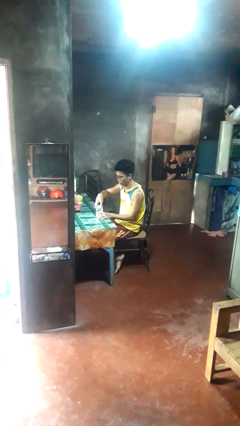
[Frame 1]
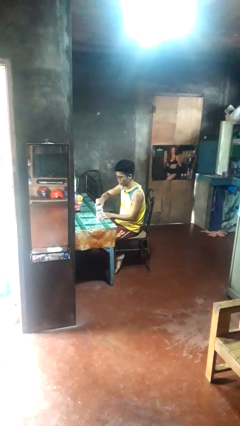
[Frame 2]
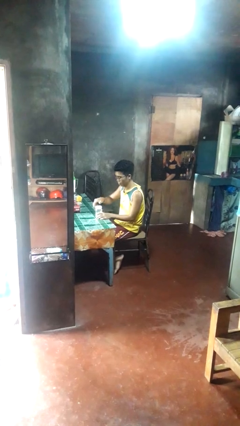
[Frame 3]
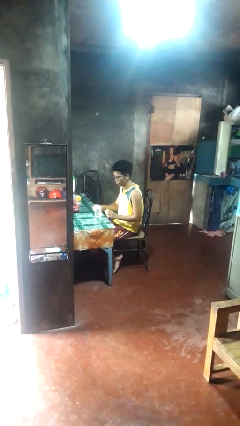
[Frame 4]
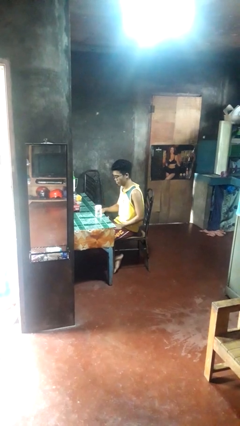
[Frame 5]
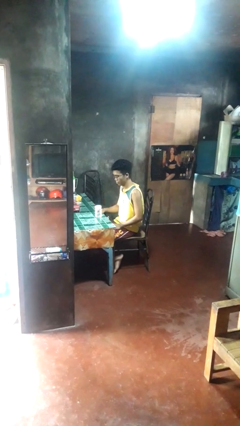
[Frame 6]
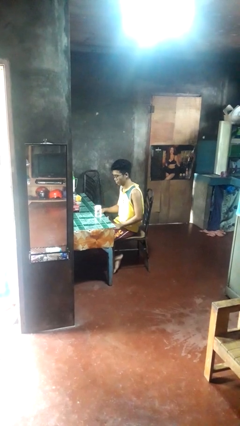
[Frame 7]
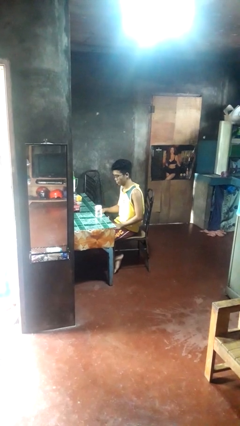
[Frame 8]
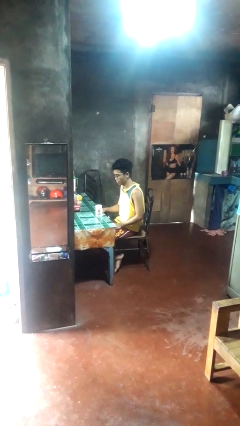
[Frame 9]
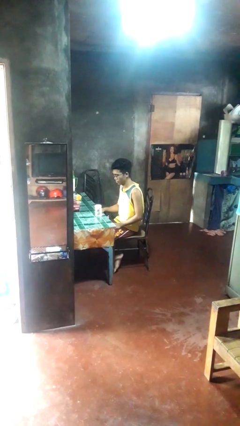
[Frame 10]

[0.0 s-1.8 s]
person closes jar

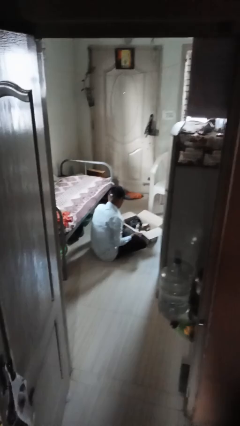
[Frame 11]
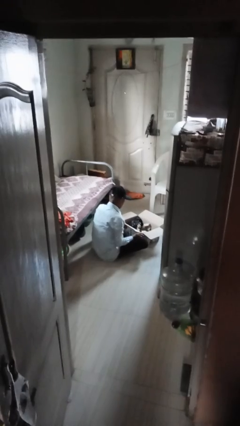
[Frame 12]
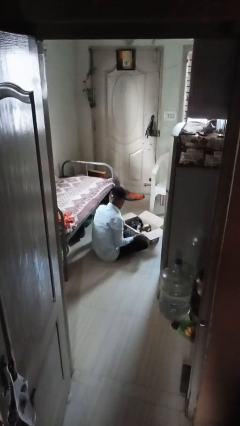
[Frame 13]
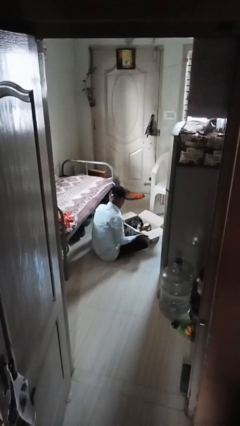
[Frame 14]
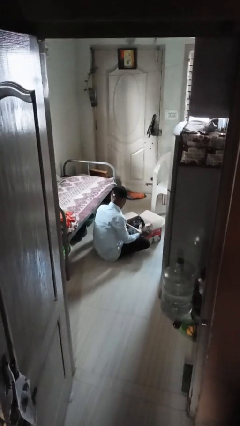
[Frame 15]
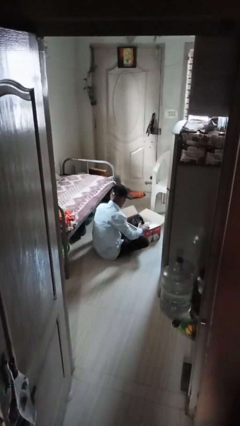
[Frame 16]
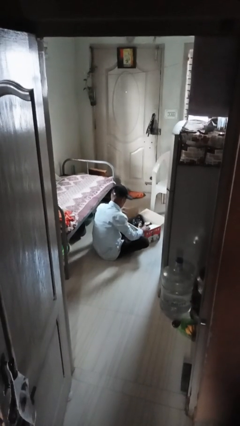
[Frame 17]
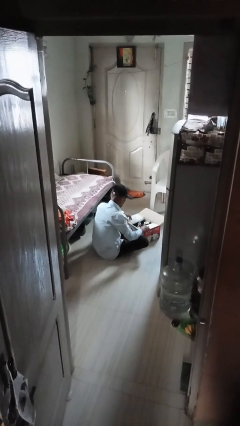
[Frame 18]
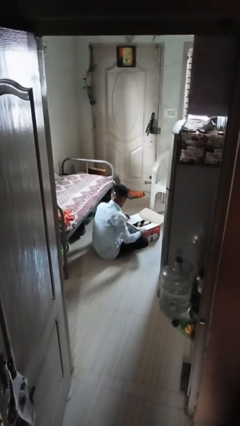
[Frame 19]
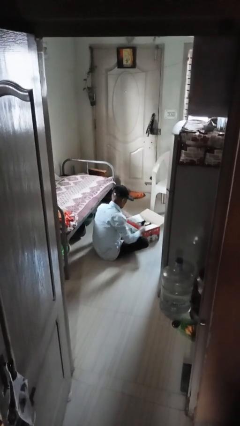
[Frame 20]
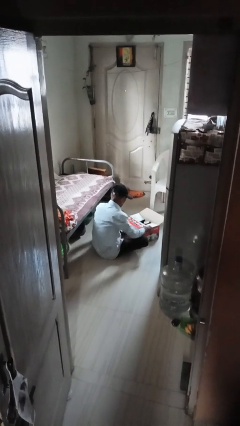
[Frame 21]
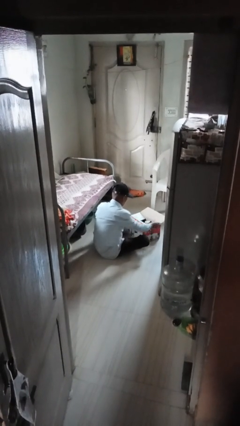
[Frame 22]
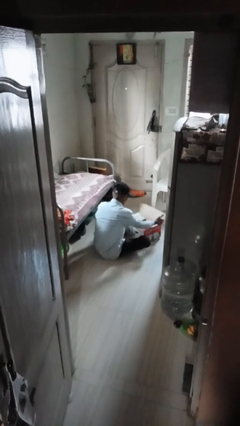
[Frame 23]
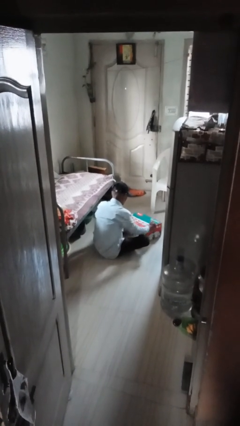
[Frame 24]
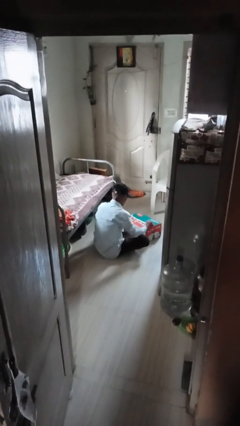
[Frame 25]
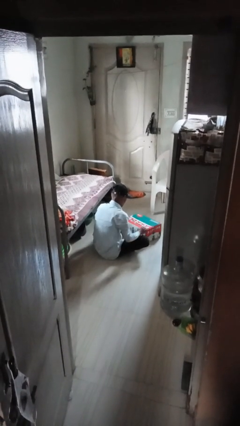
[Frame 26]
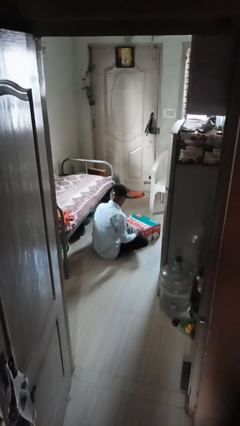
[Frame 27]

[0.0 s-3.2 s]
person closes box

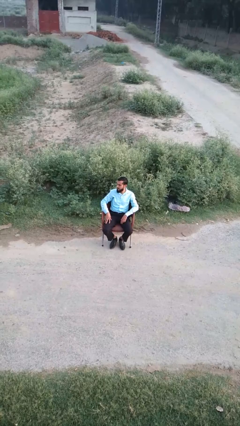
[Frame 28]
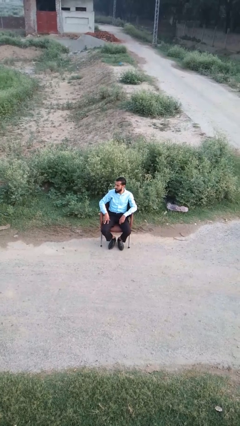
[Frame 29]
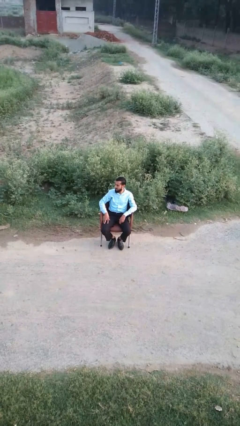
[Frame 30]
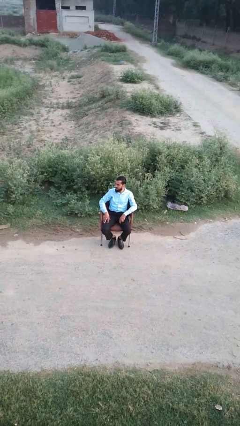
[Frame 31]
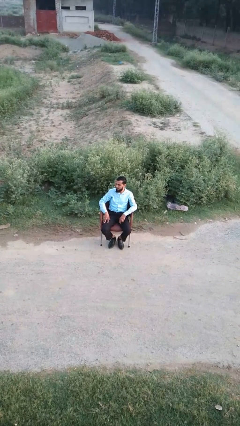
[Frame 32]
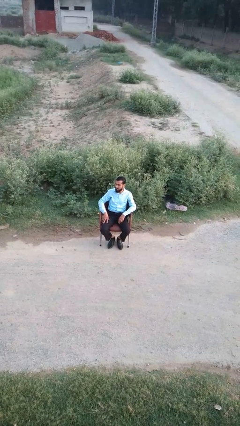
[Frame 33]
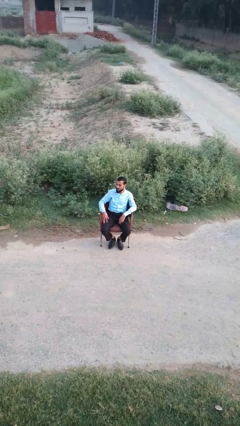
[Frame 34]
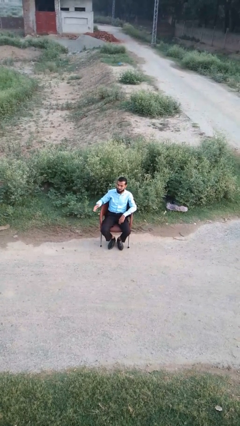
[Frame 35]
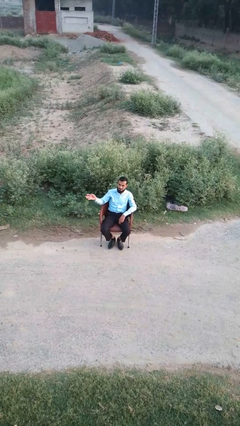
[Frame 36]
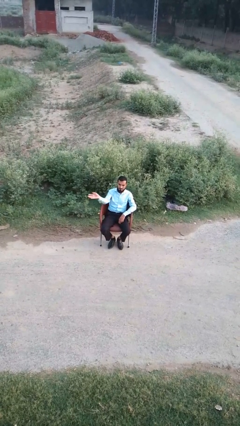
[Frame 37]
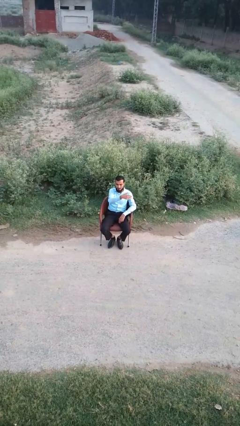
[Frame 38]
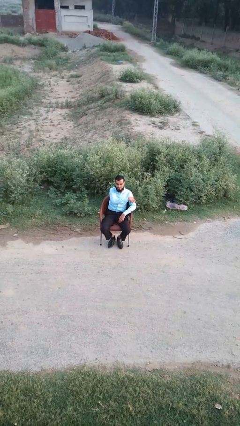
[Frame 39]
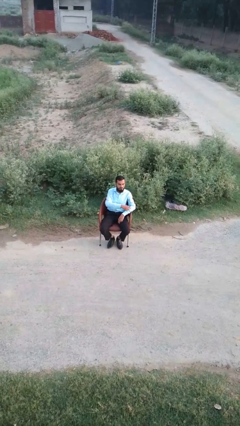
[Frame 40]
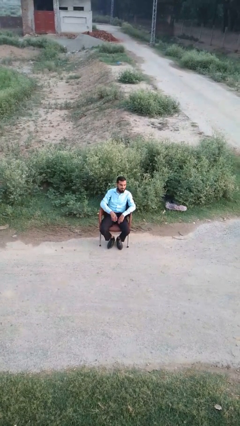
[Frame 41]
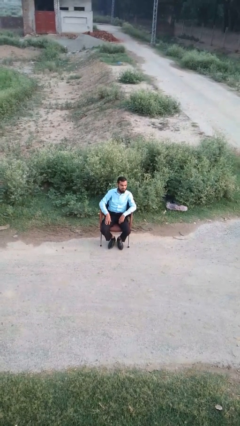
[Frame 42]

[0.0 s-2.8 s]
person gestures swipe left

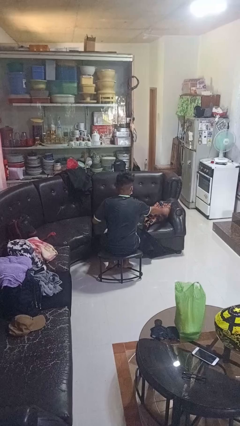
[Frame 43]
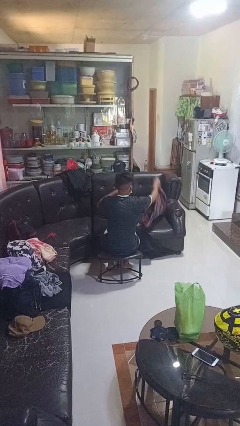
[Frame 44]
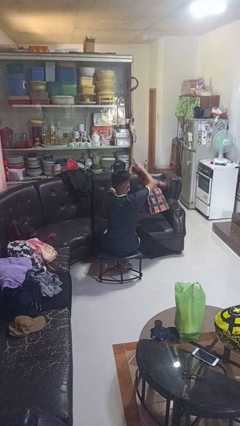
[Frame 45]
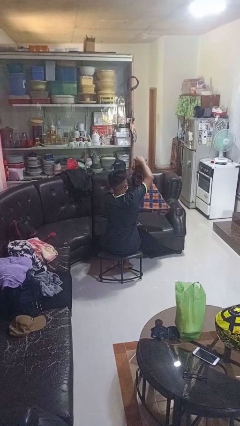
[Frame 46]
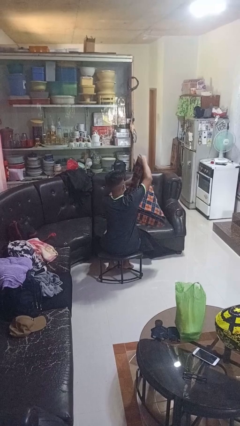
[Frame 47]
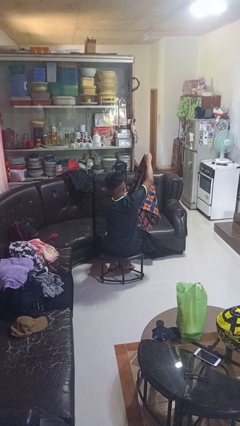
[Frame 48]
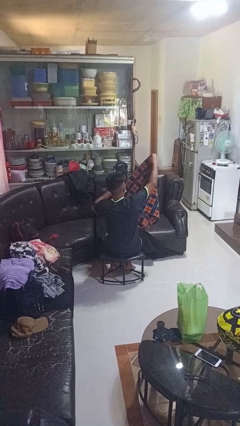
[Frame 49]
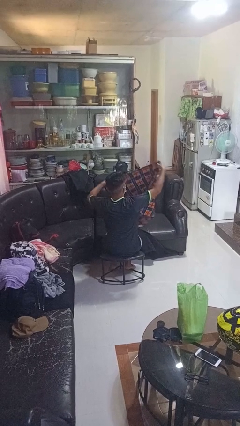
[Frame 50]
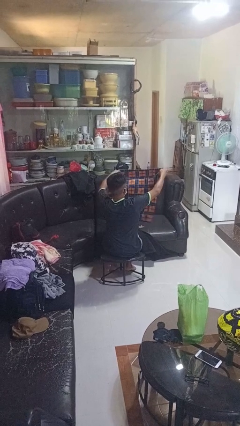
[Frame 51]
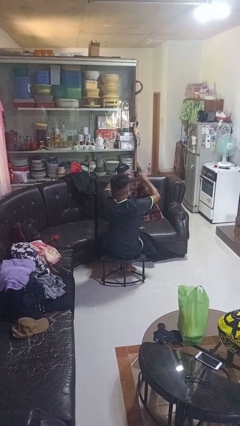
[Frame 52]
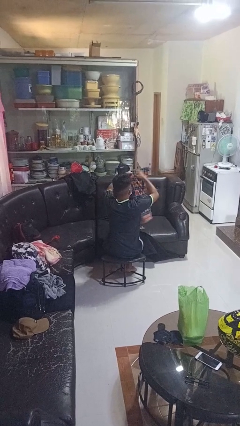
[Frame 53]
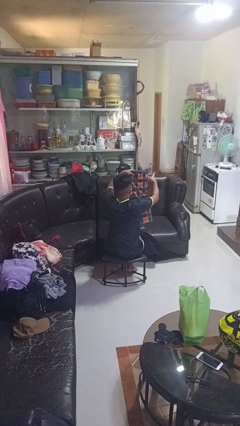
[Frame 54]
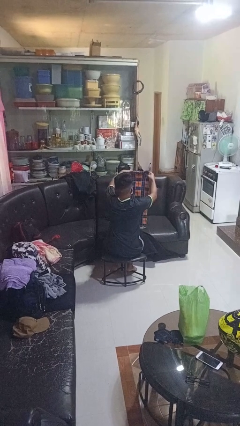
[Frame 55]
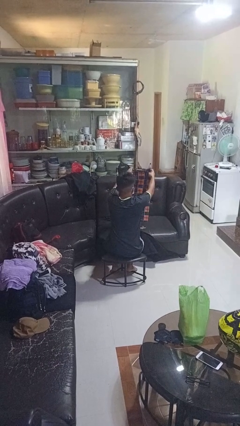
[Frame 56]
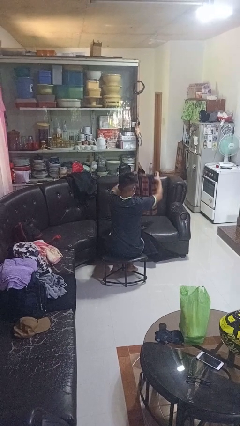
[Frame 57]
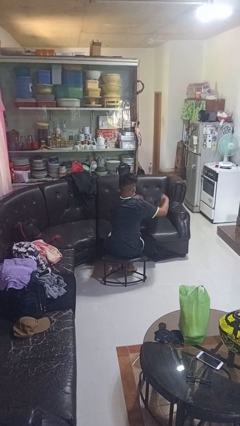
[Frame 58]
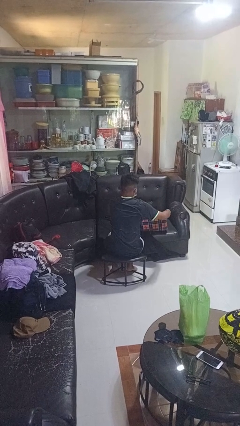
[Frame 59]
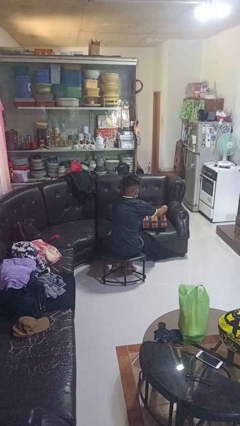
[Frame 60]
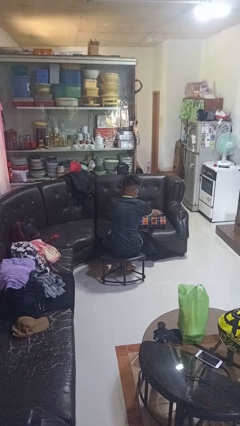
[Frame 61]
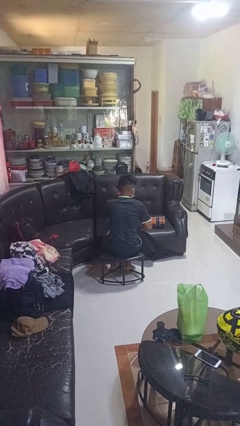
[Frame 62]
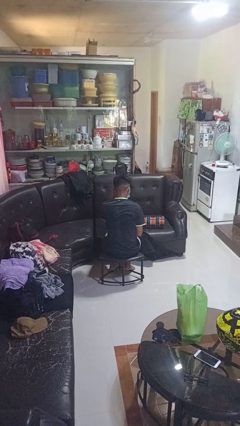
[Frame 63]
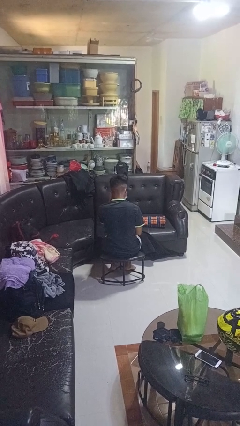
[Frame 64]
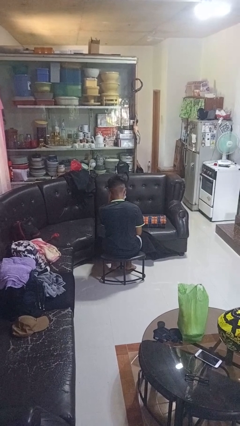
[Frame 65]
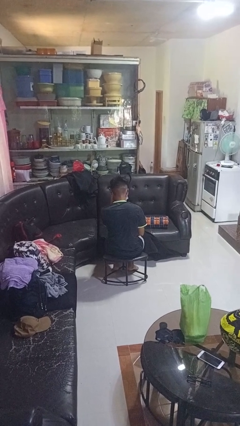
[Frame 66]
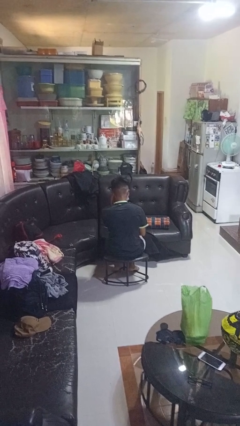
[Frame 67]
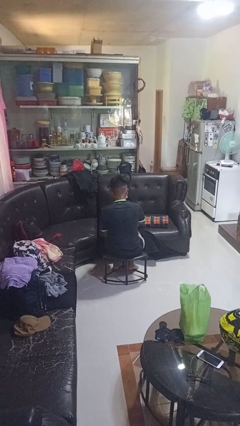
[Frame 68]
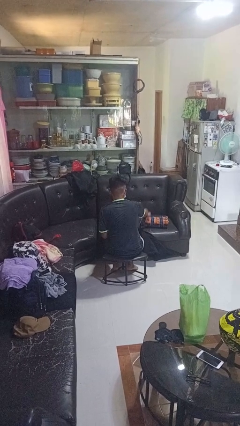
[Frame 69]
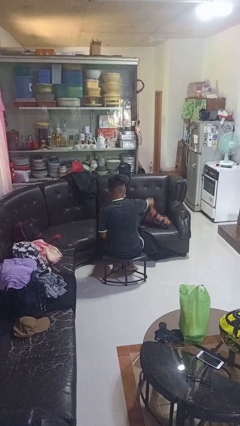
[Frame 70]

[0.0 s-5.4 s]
person folds blanket

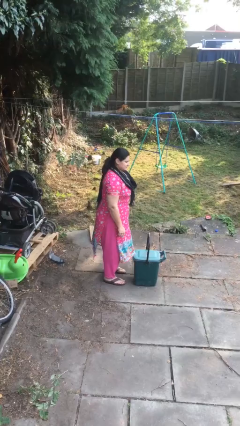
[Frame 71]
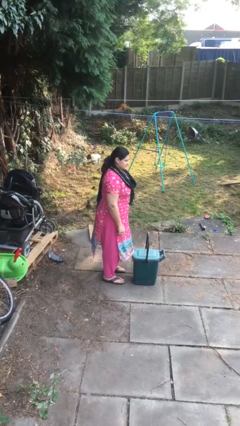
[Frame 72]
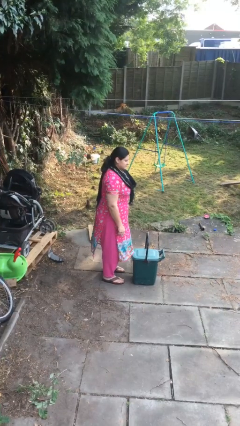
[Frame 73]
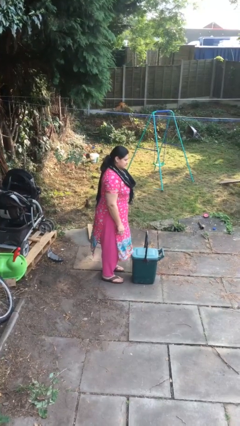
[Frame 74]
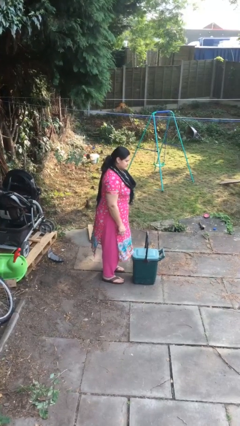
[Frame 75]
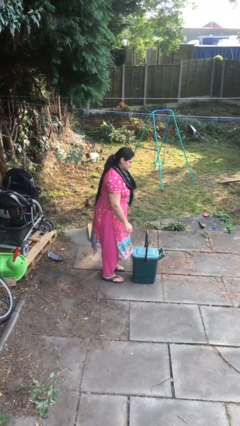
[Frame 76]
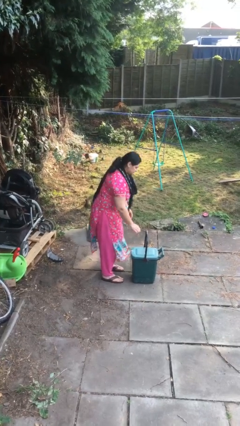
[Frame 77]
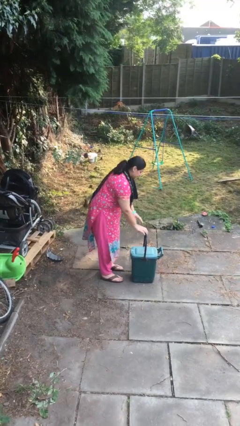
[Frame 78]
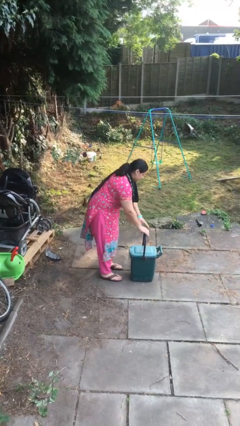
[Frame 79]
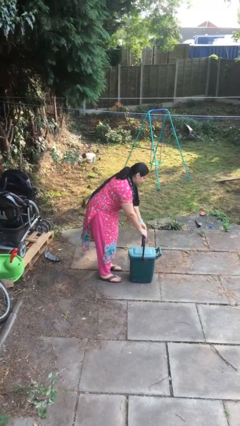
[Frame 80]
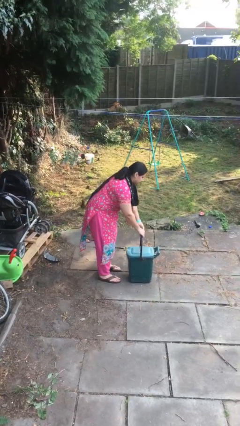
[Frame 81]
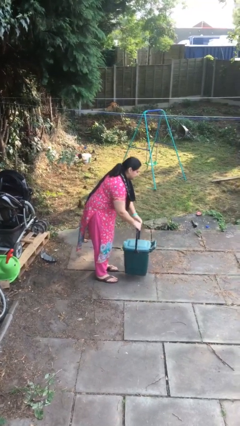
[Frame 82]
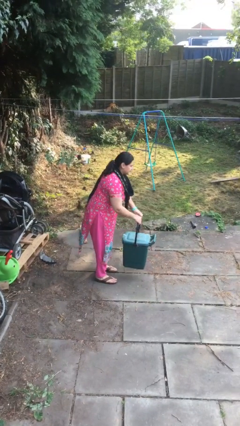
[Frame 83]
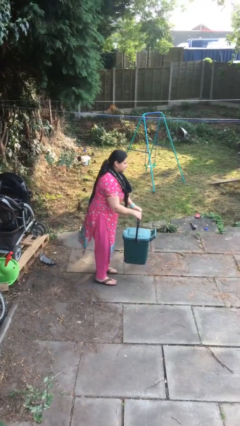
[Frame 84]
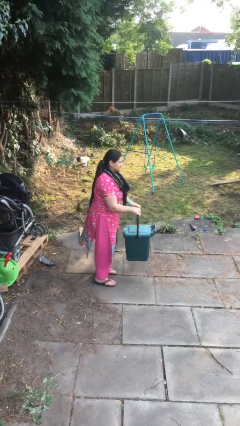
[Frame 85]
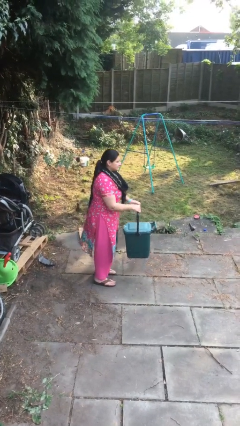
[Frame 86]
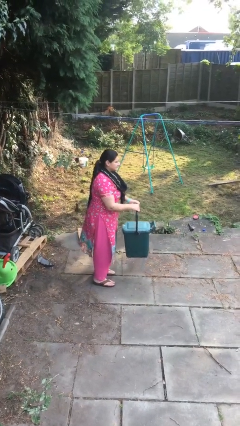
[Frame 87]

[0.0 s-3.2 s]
person picks up object from floor

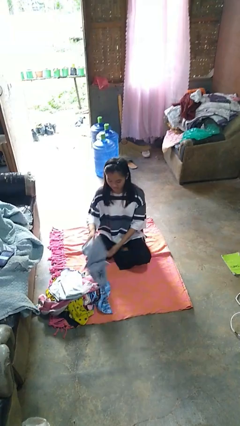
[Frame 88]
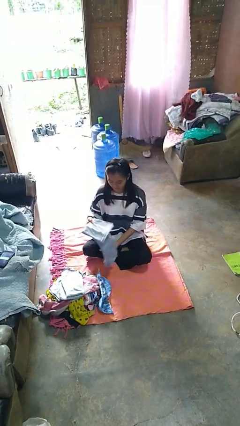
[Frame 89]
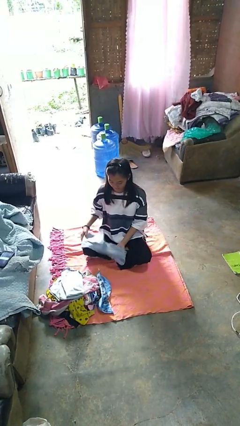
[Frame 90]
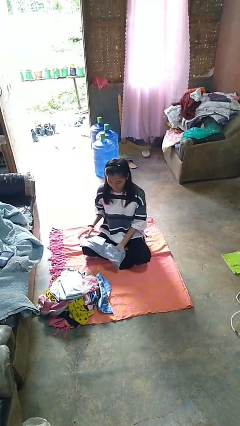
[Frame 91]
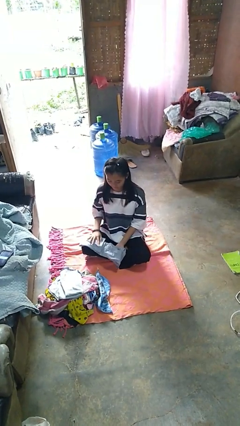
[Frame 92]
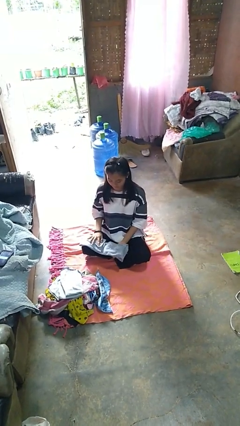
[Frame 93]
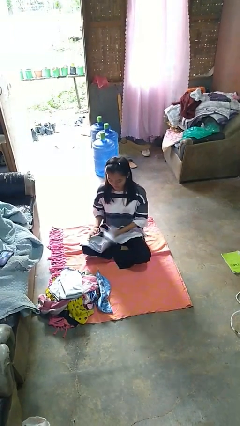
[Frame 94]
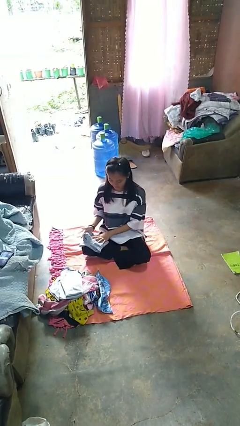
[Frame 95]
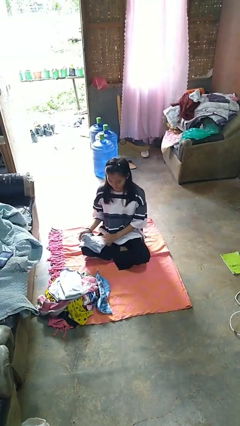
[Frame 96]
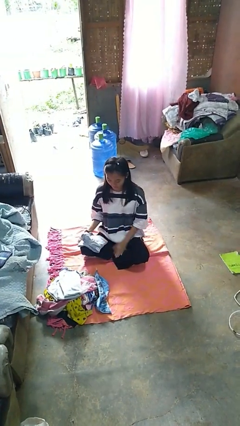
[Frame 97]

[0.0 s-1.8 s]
person folds shirt
